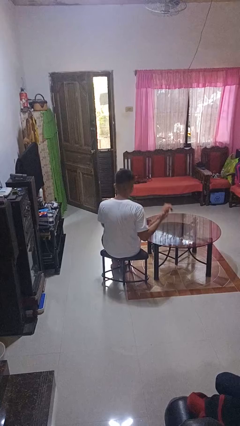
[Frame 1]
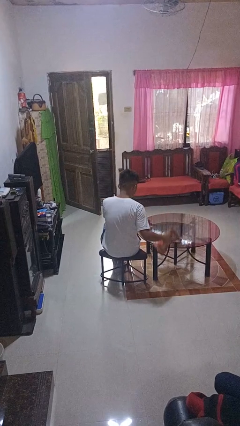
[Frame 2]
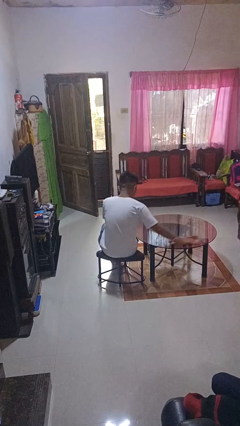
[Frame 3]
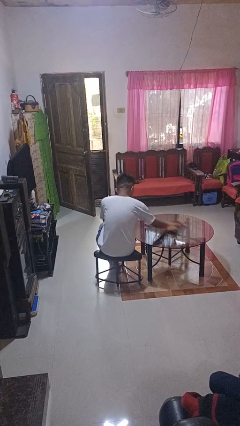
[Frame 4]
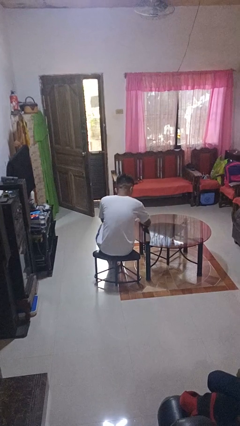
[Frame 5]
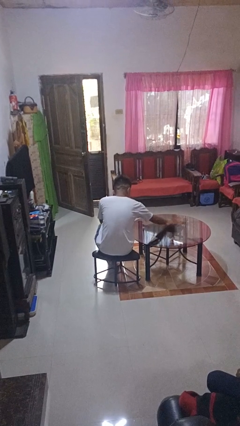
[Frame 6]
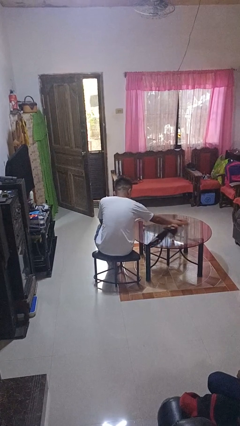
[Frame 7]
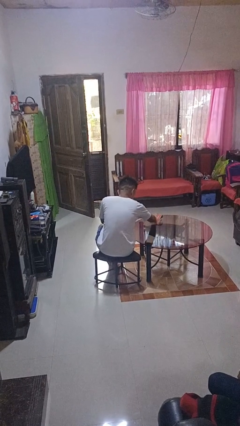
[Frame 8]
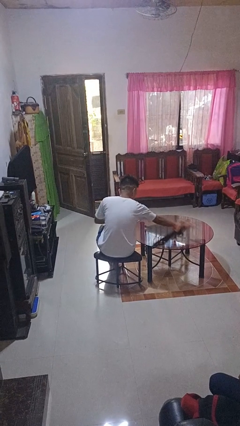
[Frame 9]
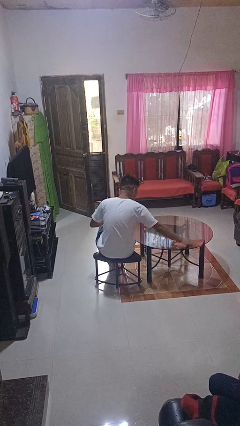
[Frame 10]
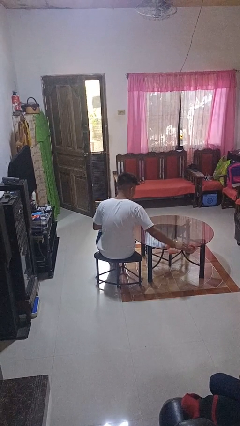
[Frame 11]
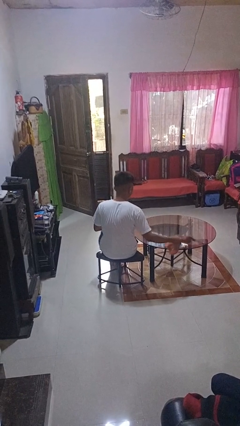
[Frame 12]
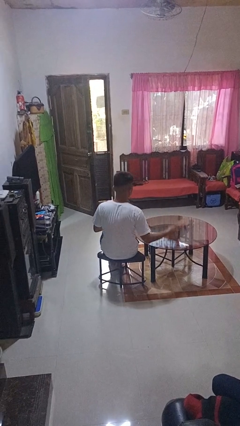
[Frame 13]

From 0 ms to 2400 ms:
person cleans table with rag

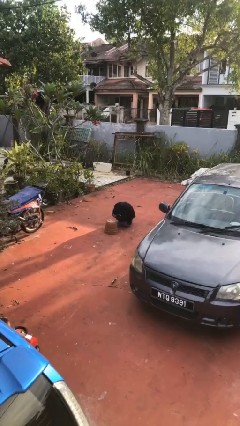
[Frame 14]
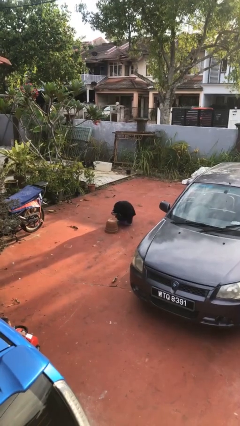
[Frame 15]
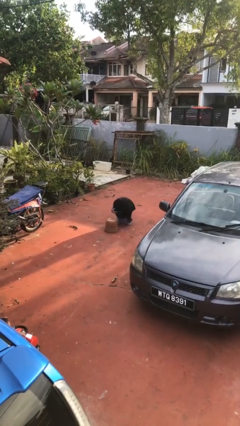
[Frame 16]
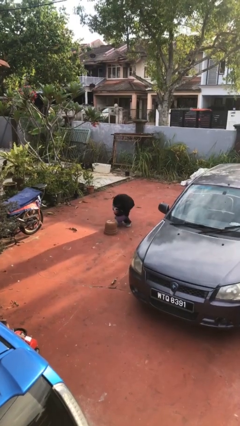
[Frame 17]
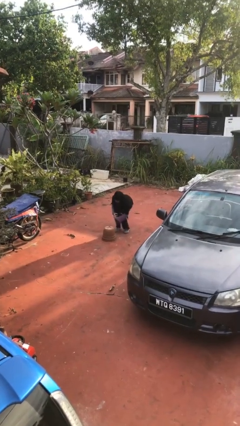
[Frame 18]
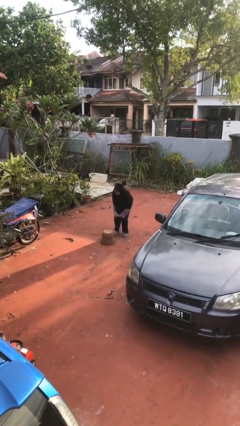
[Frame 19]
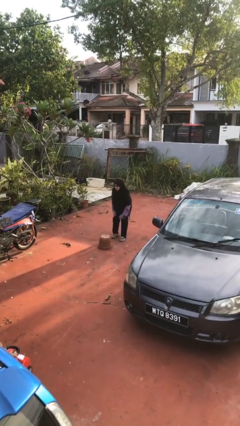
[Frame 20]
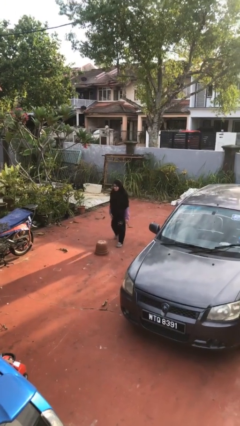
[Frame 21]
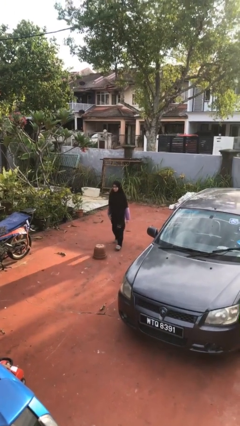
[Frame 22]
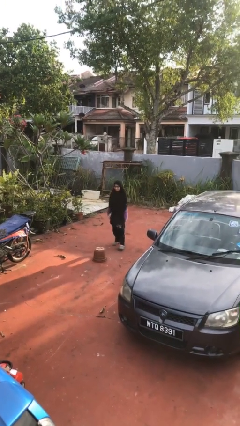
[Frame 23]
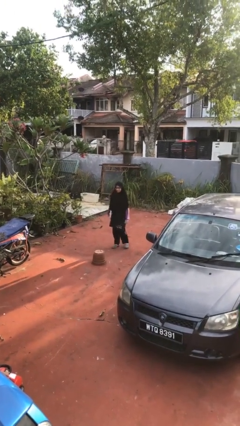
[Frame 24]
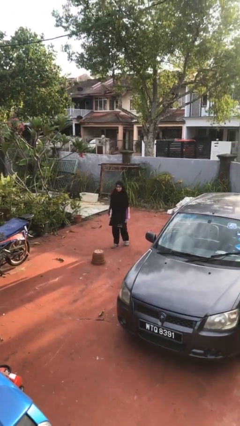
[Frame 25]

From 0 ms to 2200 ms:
person stands up from floor

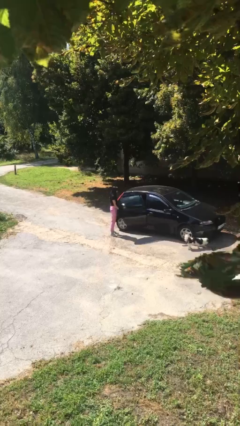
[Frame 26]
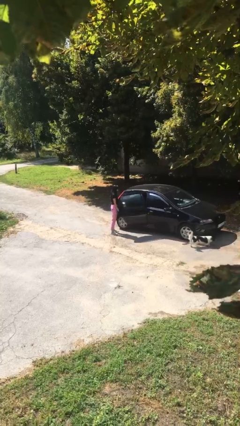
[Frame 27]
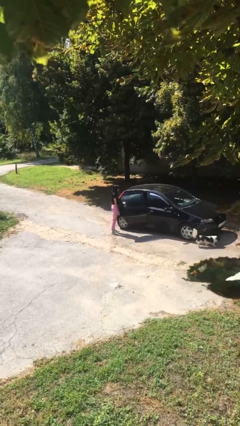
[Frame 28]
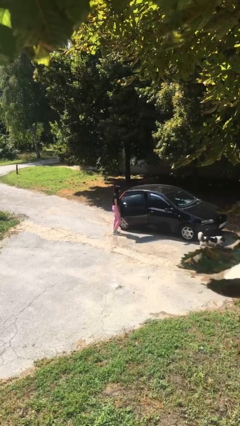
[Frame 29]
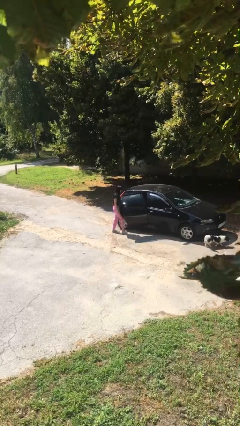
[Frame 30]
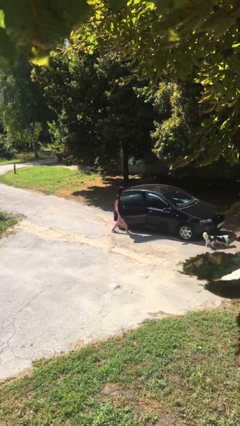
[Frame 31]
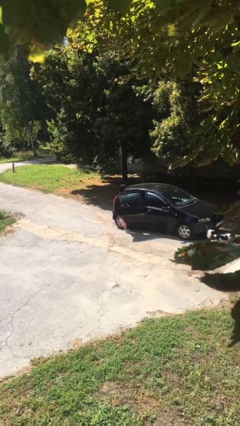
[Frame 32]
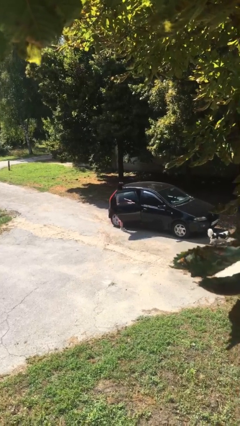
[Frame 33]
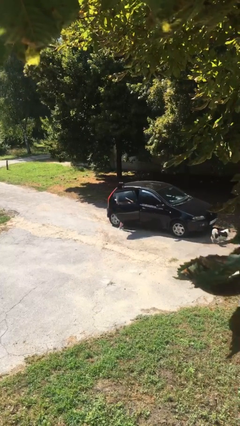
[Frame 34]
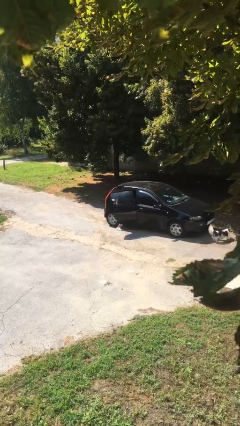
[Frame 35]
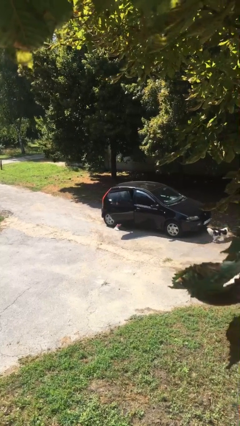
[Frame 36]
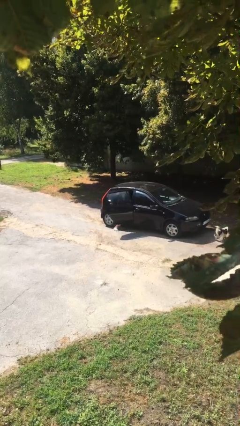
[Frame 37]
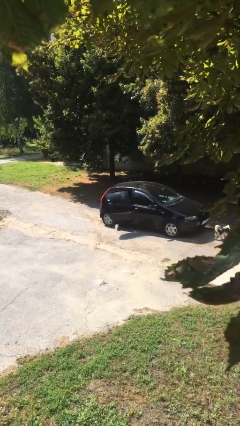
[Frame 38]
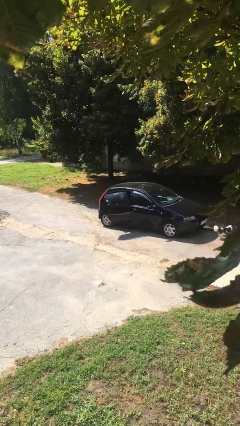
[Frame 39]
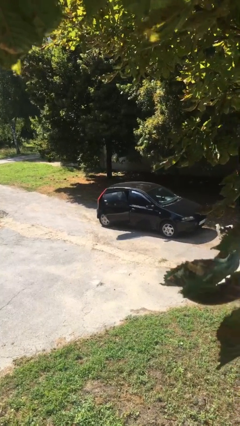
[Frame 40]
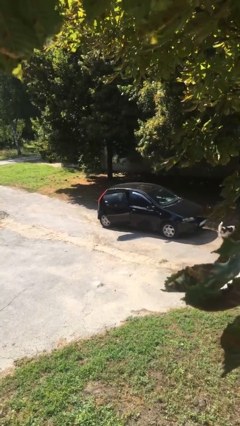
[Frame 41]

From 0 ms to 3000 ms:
person enters car

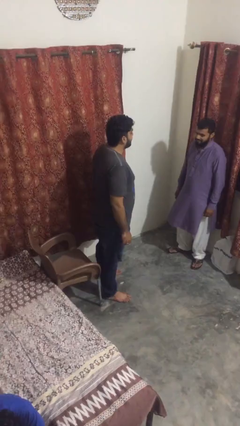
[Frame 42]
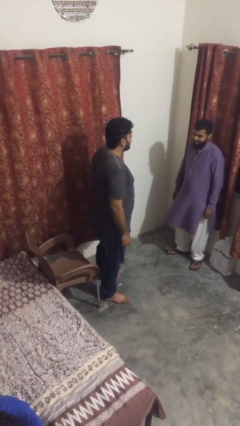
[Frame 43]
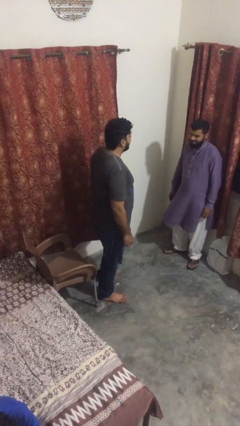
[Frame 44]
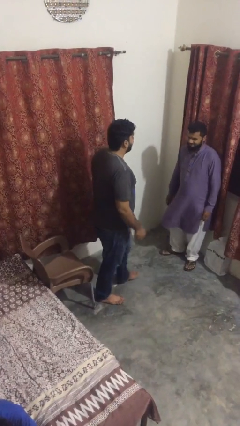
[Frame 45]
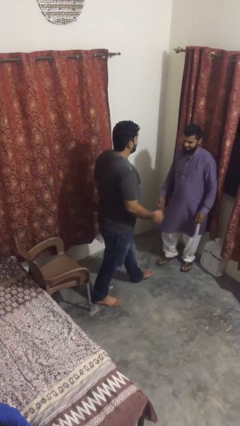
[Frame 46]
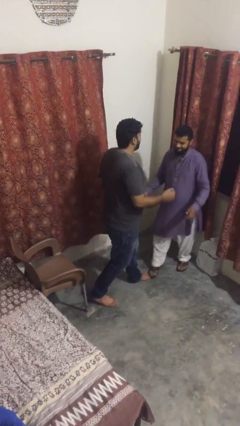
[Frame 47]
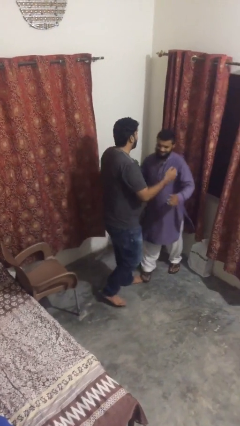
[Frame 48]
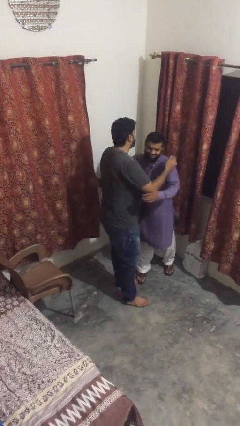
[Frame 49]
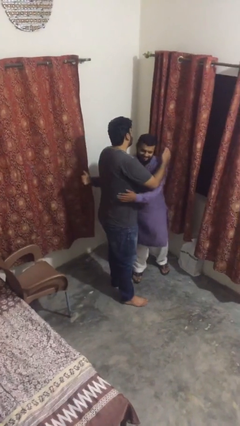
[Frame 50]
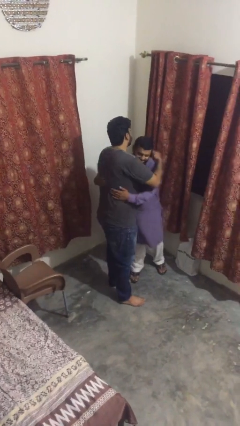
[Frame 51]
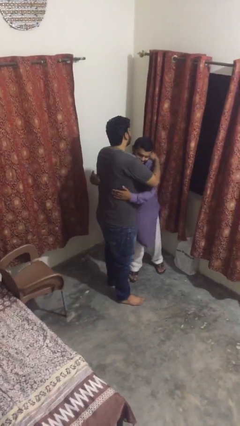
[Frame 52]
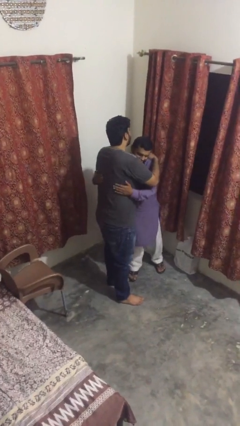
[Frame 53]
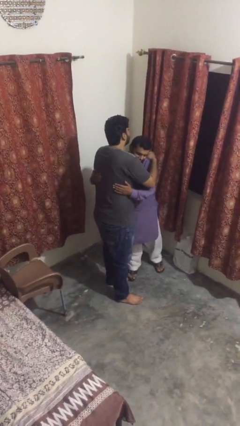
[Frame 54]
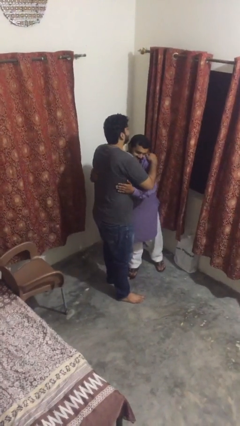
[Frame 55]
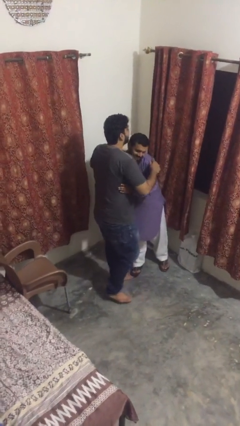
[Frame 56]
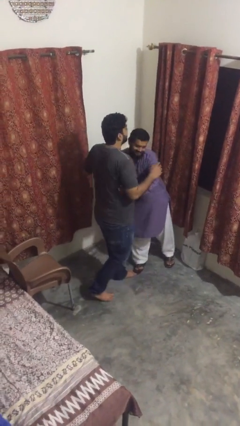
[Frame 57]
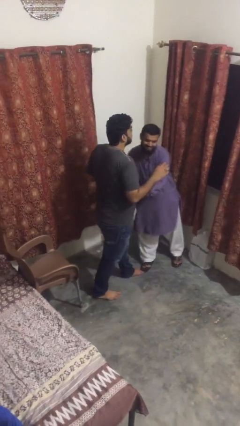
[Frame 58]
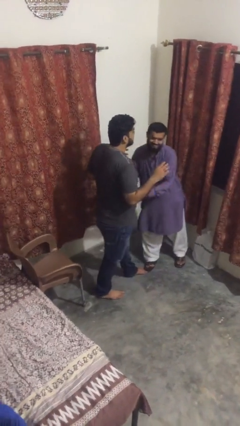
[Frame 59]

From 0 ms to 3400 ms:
person embraces person

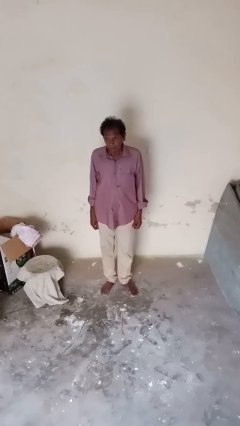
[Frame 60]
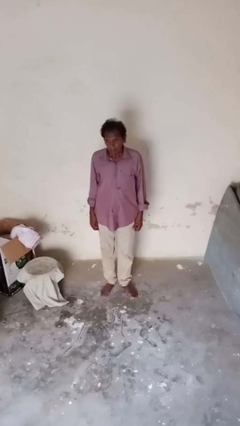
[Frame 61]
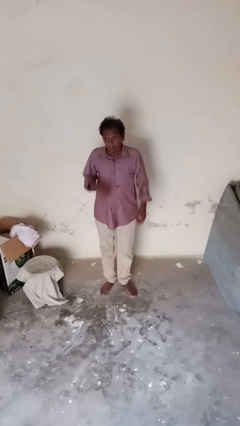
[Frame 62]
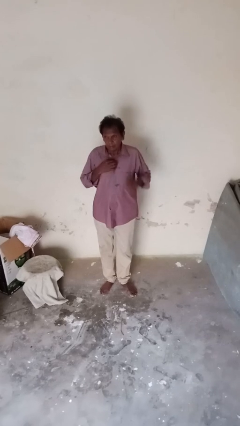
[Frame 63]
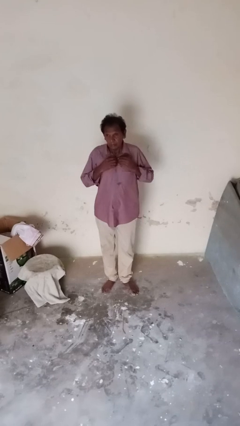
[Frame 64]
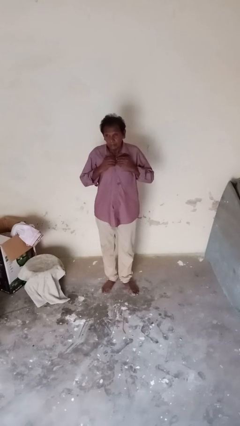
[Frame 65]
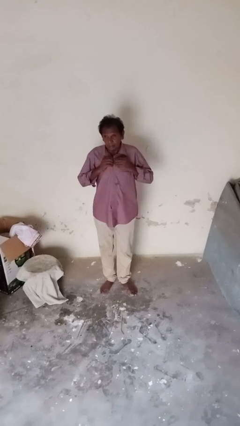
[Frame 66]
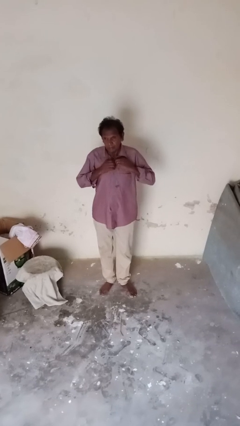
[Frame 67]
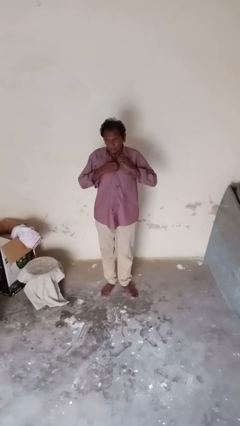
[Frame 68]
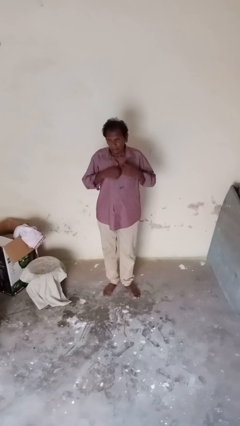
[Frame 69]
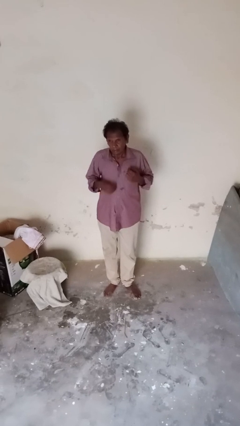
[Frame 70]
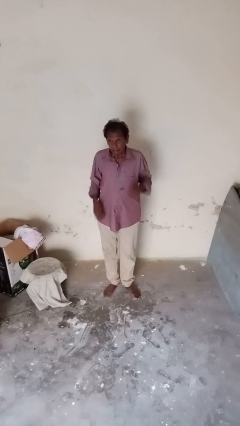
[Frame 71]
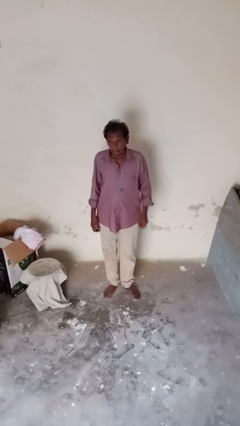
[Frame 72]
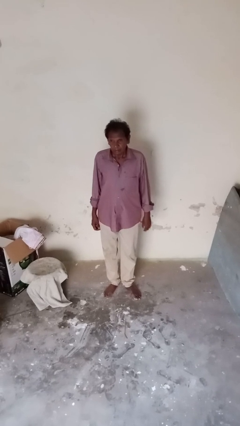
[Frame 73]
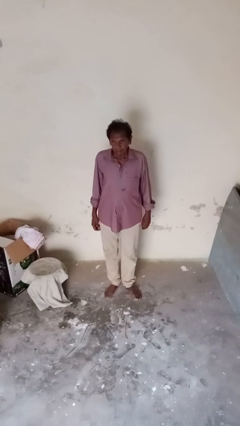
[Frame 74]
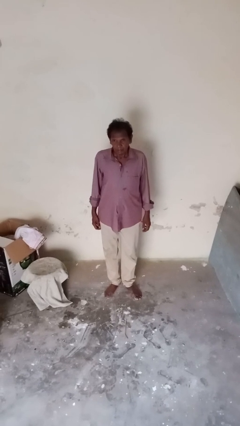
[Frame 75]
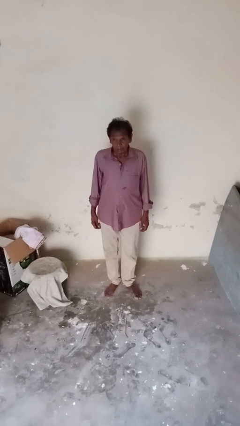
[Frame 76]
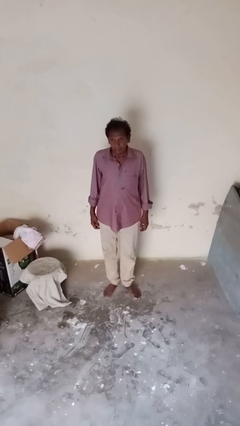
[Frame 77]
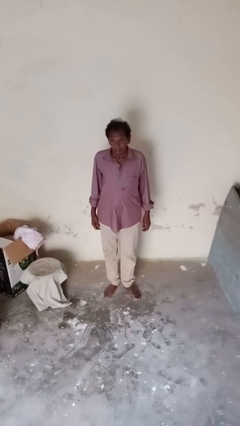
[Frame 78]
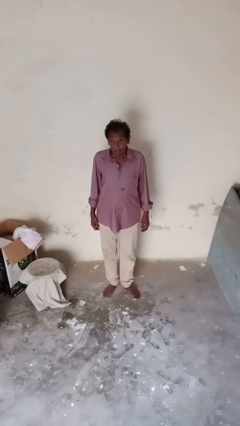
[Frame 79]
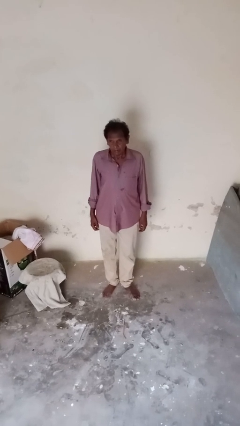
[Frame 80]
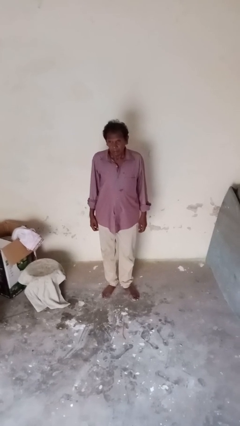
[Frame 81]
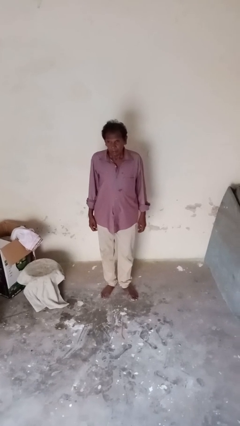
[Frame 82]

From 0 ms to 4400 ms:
person unbuttons shirt

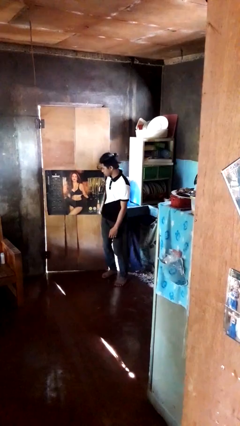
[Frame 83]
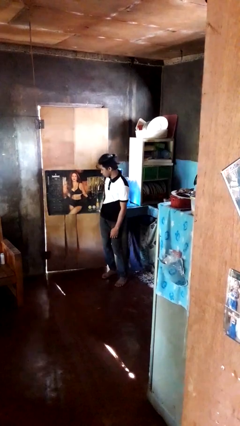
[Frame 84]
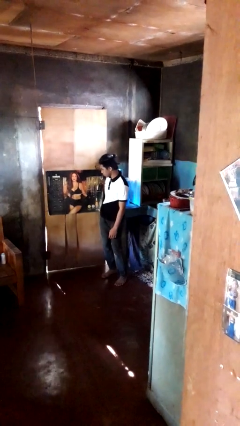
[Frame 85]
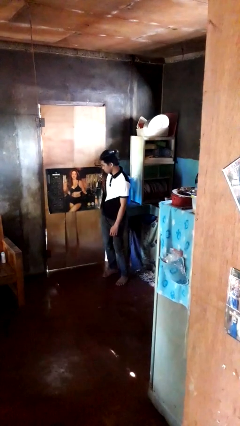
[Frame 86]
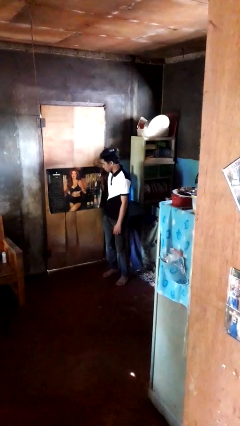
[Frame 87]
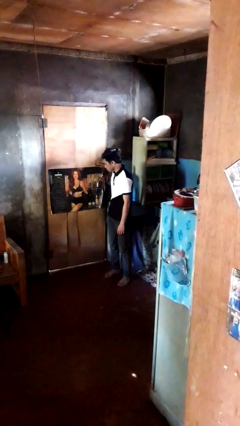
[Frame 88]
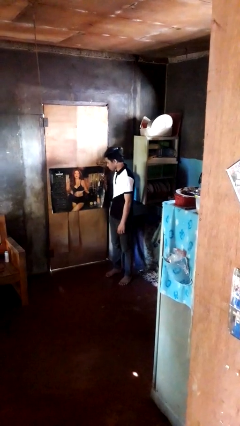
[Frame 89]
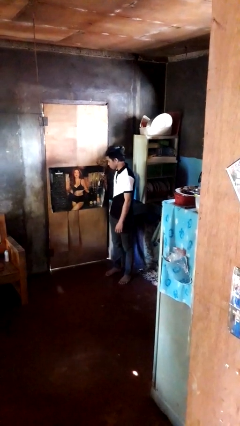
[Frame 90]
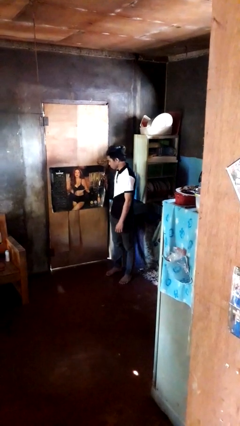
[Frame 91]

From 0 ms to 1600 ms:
person closes door with hip

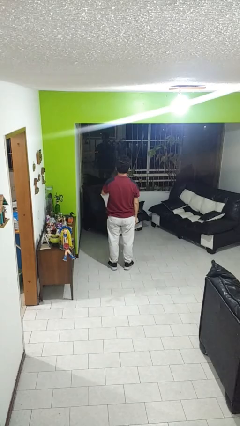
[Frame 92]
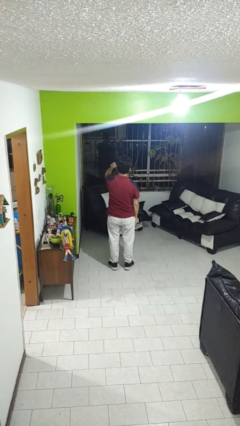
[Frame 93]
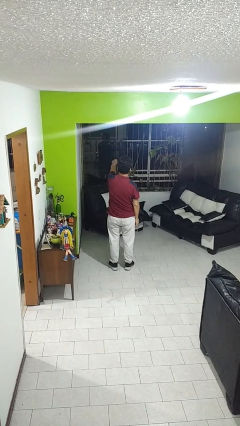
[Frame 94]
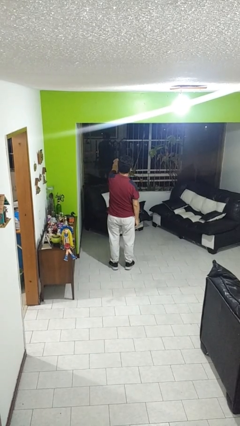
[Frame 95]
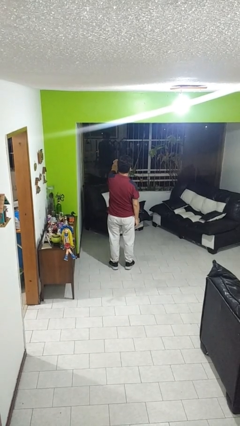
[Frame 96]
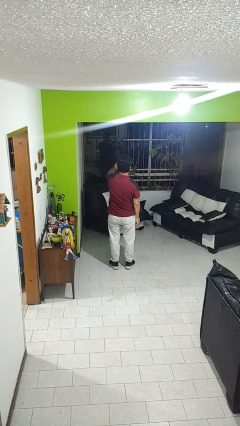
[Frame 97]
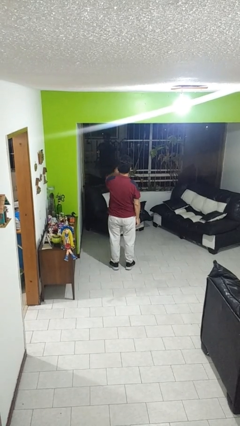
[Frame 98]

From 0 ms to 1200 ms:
person points at person
